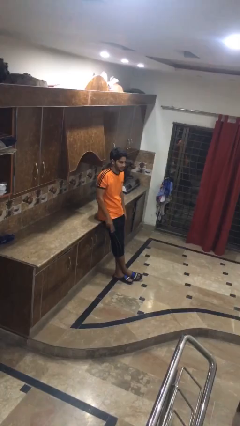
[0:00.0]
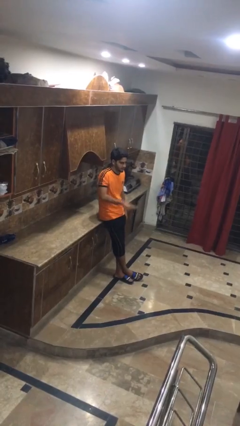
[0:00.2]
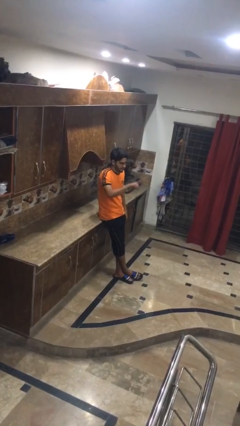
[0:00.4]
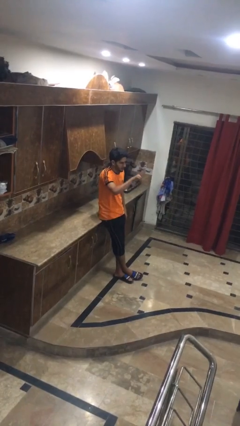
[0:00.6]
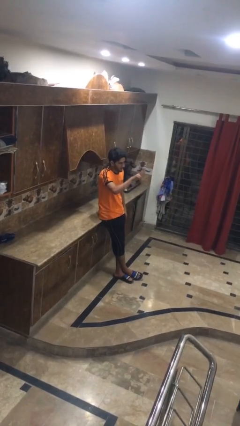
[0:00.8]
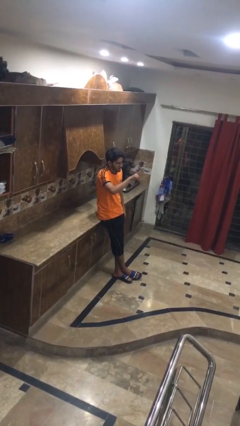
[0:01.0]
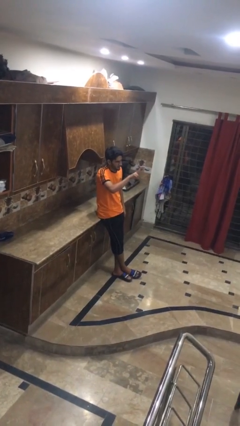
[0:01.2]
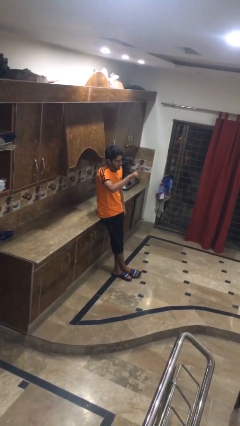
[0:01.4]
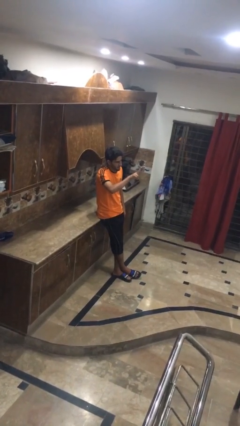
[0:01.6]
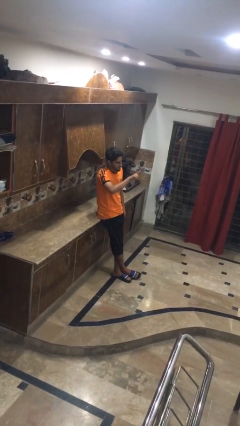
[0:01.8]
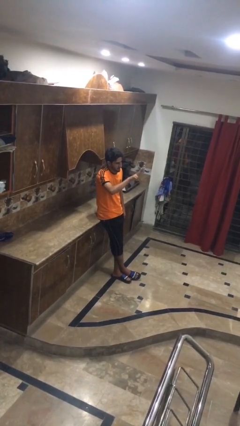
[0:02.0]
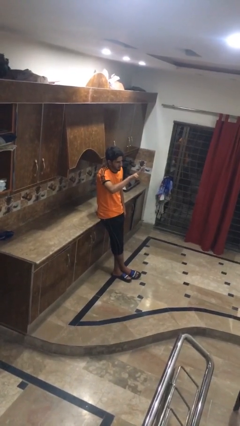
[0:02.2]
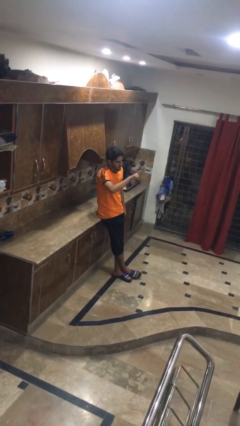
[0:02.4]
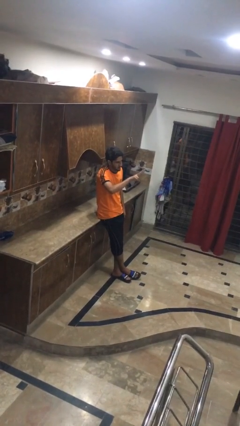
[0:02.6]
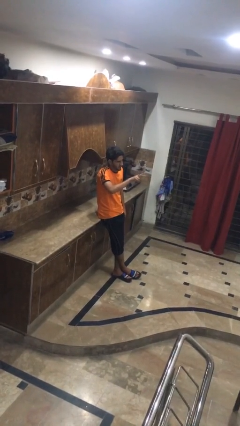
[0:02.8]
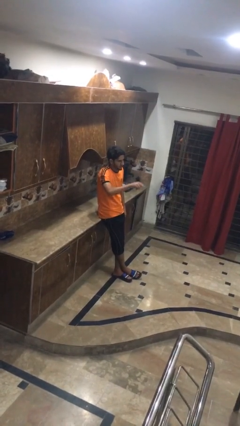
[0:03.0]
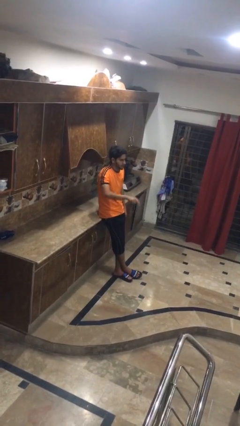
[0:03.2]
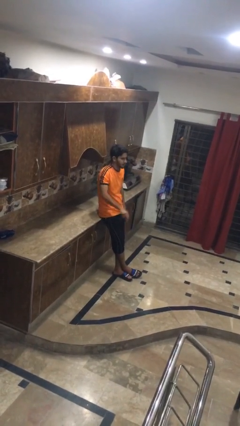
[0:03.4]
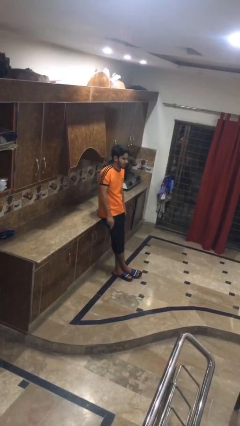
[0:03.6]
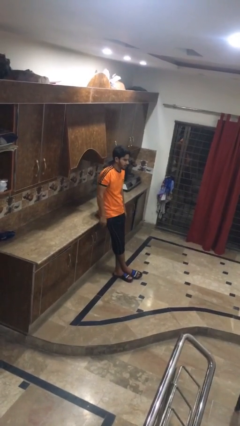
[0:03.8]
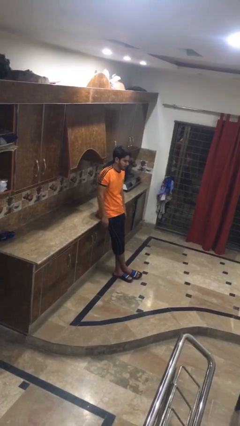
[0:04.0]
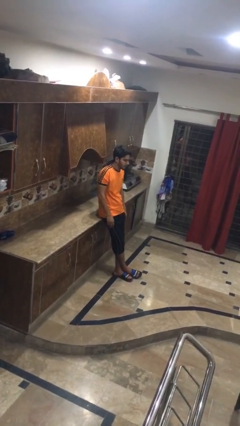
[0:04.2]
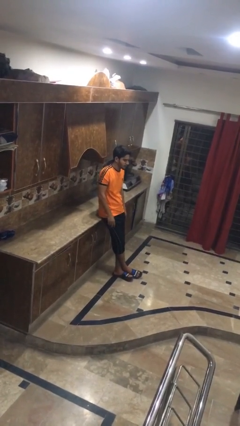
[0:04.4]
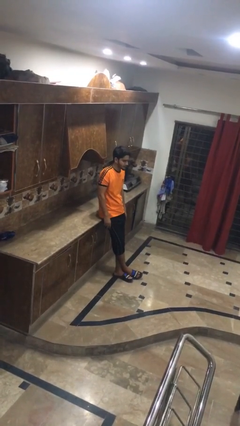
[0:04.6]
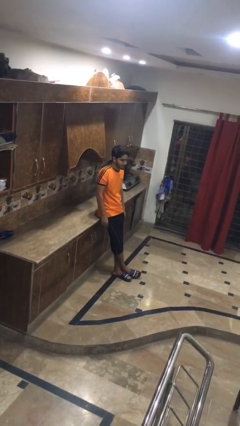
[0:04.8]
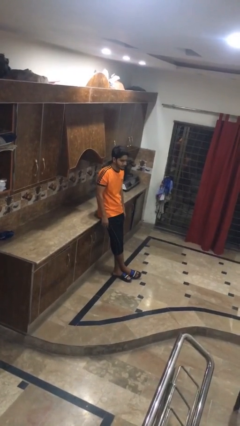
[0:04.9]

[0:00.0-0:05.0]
person gestures peace

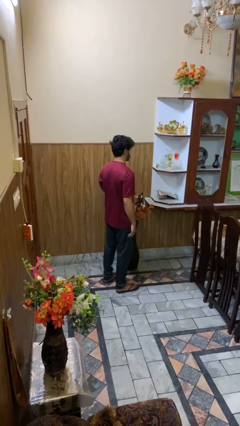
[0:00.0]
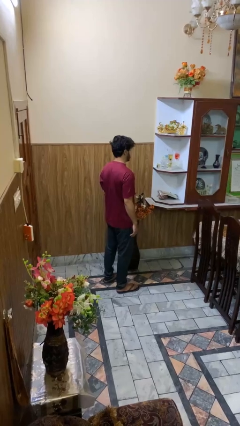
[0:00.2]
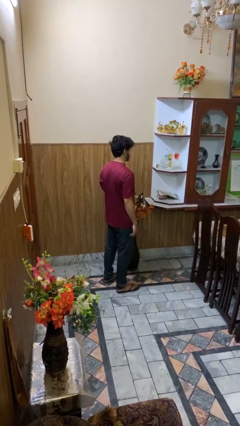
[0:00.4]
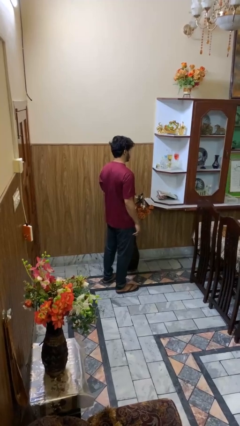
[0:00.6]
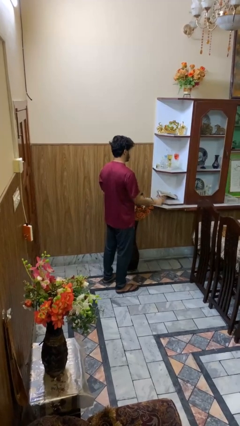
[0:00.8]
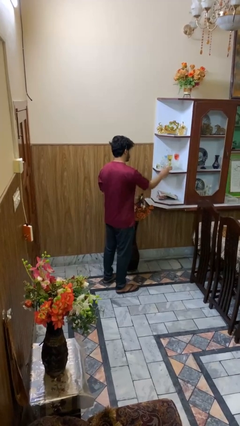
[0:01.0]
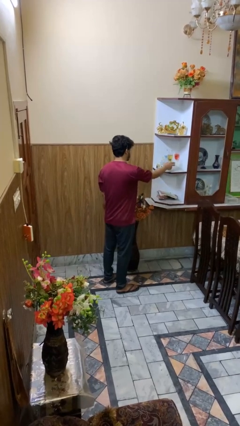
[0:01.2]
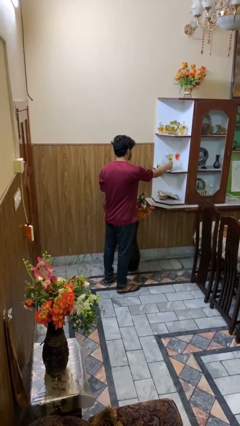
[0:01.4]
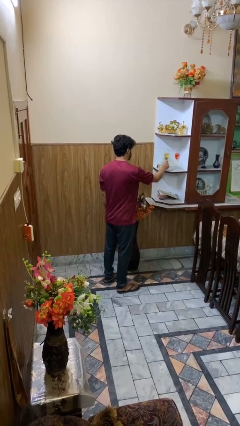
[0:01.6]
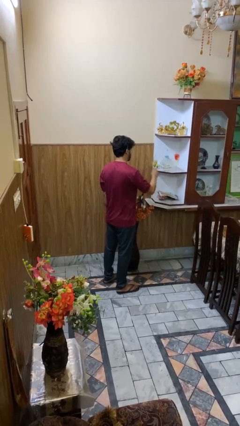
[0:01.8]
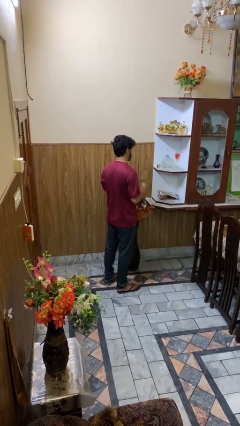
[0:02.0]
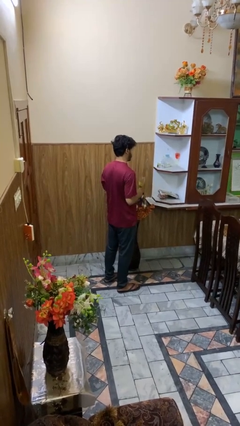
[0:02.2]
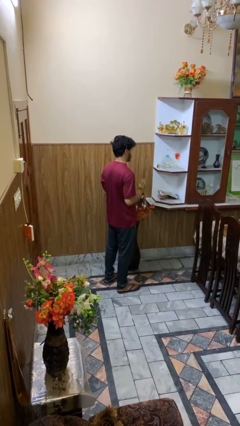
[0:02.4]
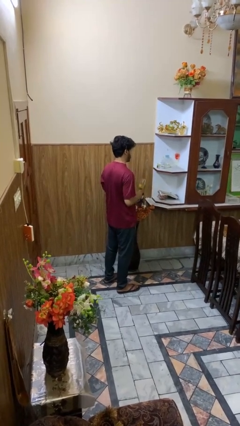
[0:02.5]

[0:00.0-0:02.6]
person picks up object from cabinet

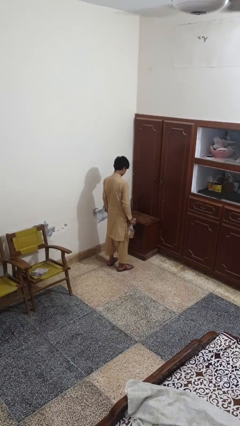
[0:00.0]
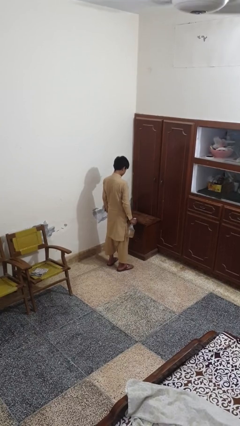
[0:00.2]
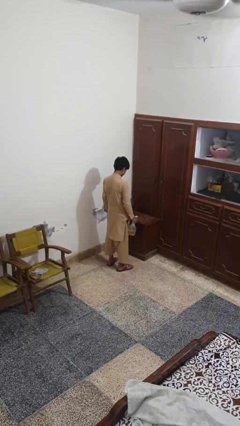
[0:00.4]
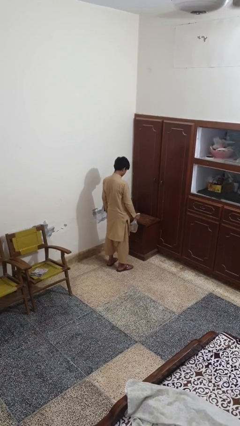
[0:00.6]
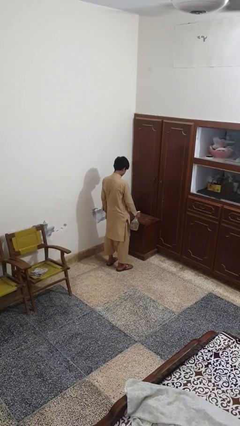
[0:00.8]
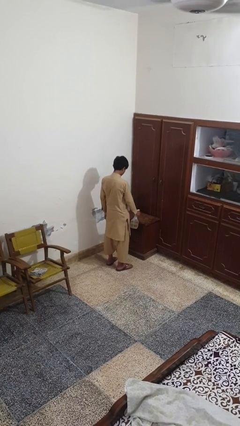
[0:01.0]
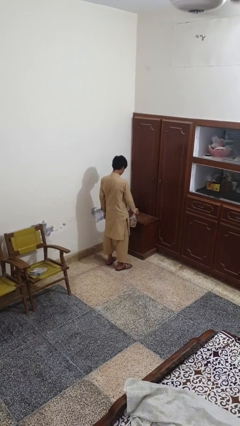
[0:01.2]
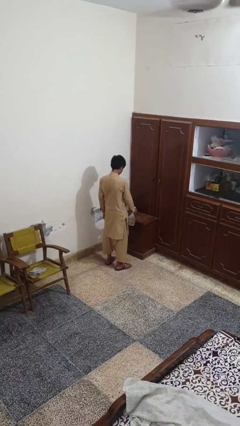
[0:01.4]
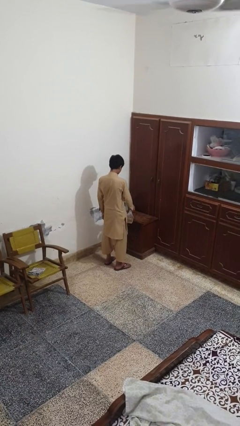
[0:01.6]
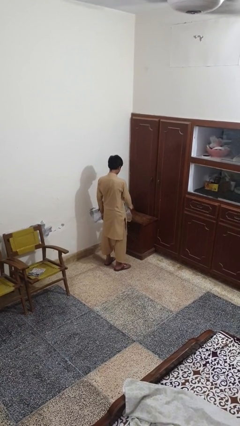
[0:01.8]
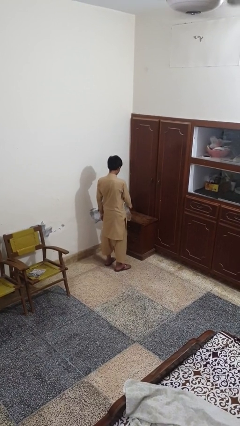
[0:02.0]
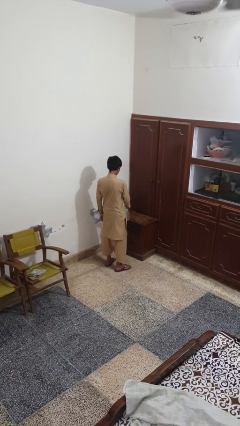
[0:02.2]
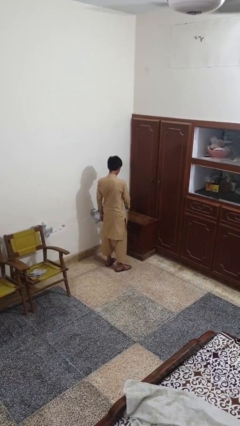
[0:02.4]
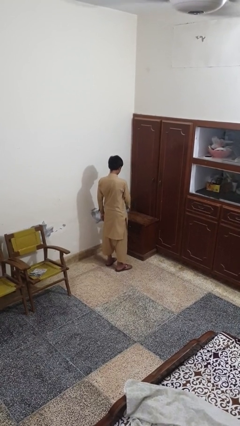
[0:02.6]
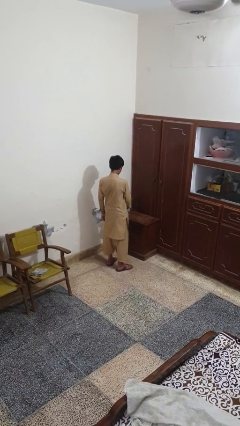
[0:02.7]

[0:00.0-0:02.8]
person sprays from bottle

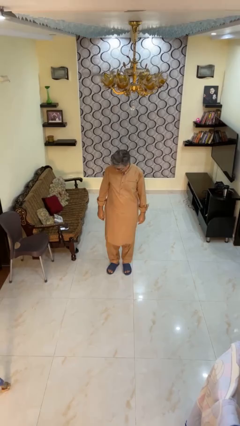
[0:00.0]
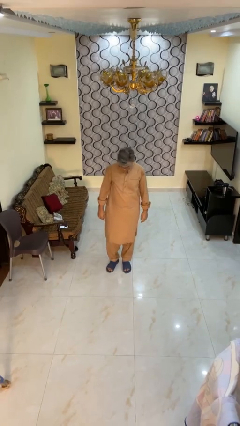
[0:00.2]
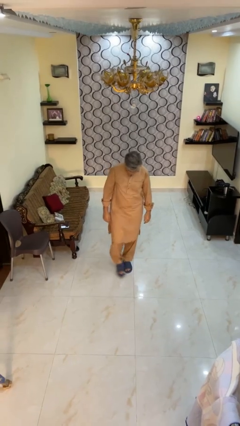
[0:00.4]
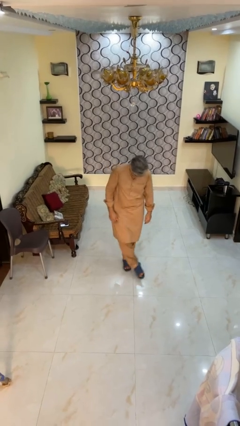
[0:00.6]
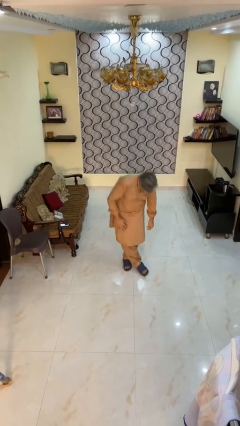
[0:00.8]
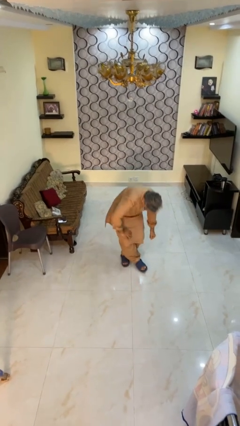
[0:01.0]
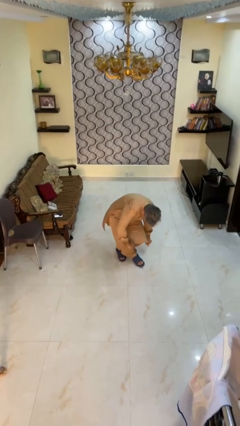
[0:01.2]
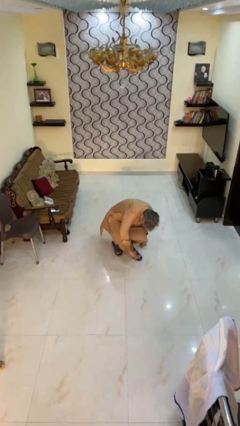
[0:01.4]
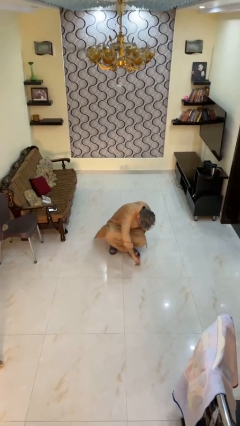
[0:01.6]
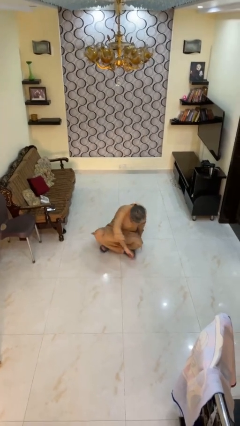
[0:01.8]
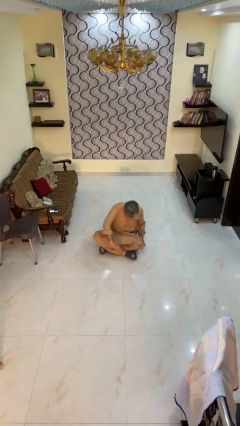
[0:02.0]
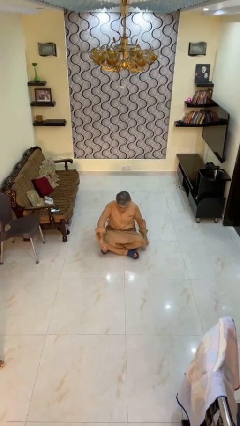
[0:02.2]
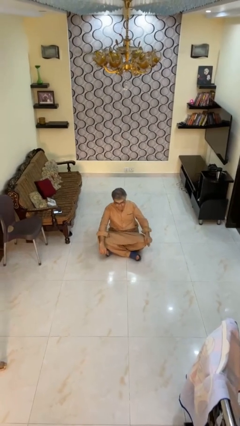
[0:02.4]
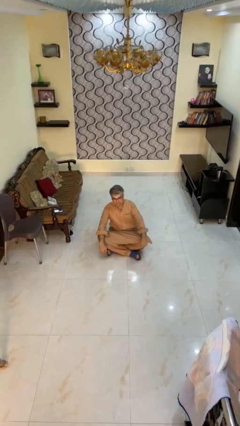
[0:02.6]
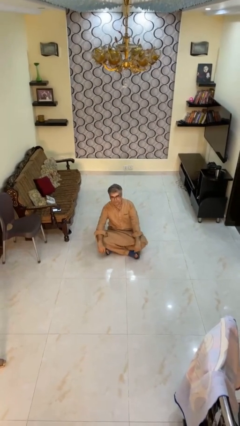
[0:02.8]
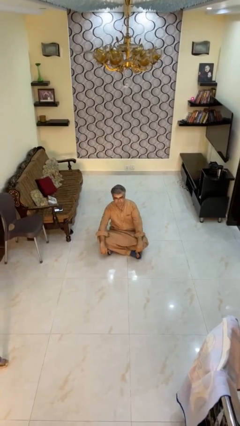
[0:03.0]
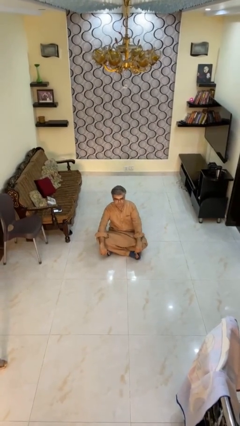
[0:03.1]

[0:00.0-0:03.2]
person sits crisscross

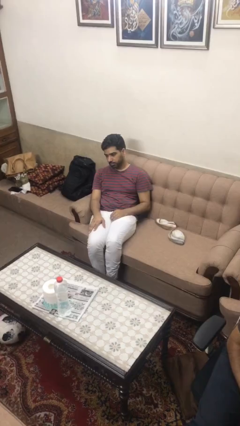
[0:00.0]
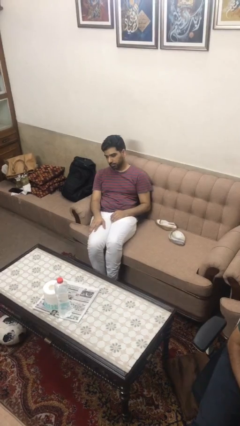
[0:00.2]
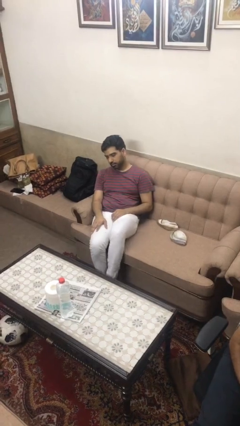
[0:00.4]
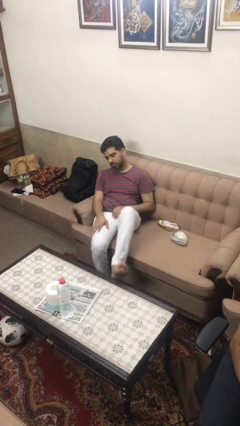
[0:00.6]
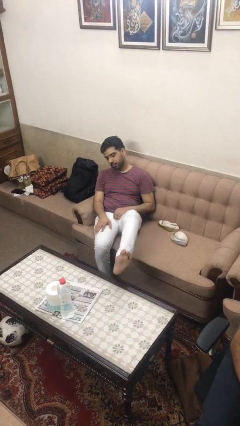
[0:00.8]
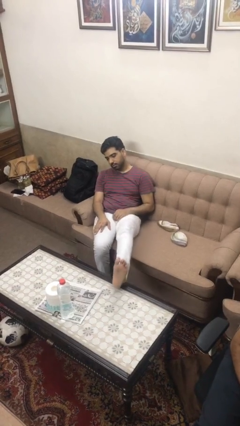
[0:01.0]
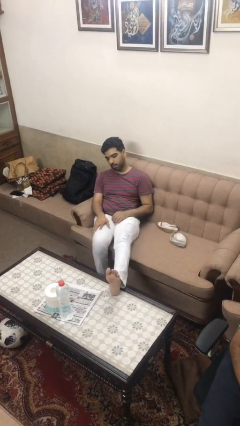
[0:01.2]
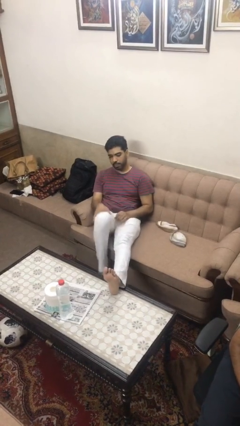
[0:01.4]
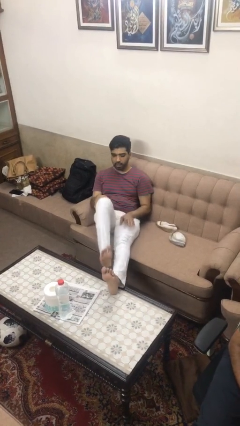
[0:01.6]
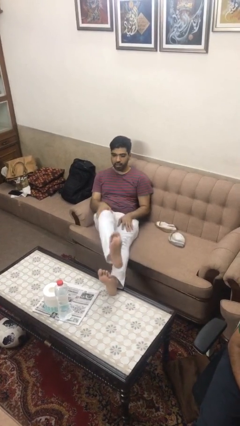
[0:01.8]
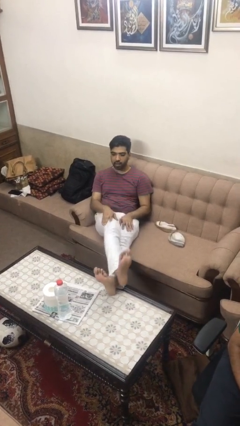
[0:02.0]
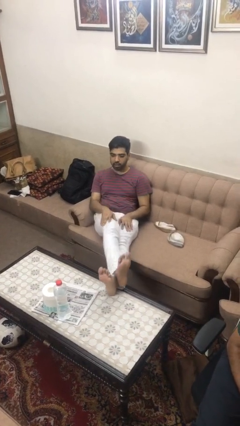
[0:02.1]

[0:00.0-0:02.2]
person puts feet up

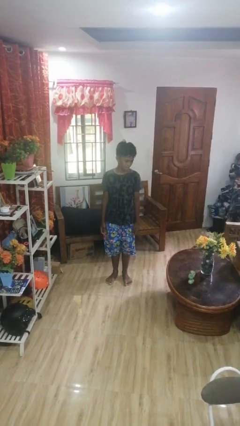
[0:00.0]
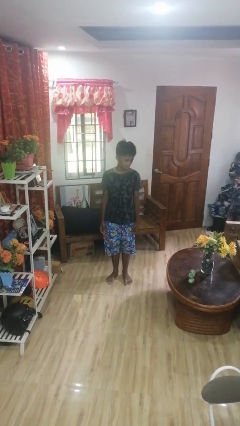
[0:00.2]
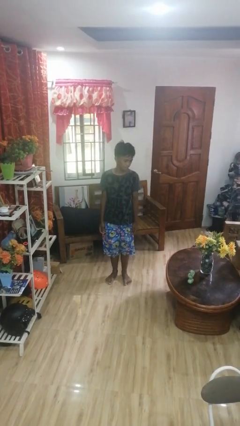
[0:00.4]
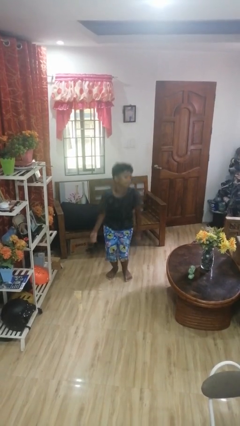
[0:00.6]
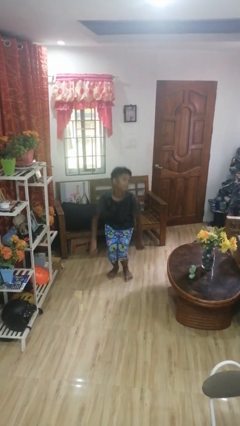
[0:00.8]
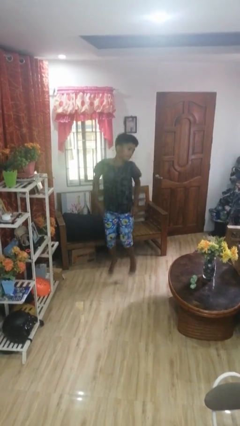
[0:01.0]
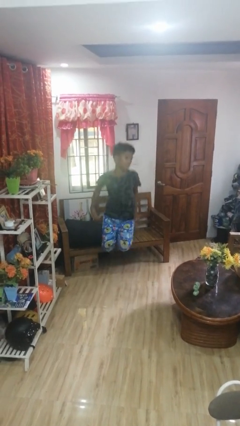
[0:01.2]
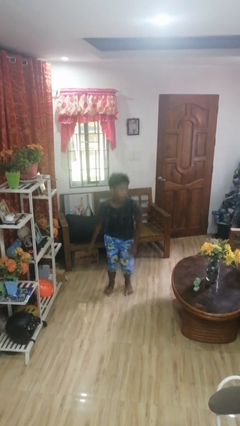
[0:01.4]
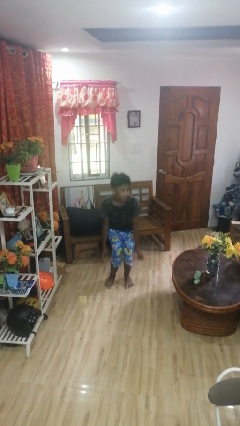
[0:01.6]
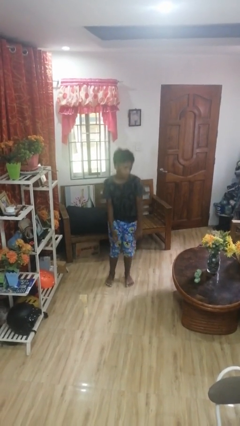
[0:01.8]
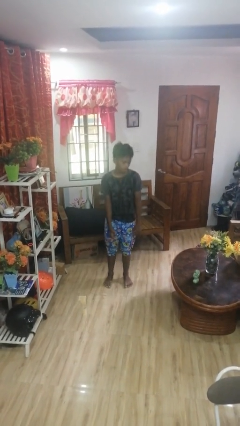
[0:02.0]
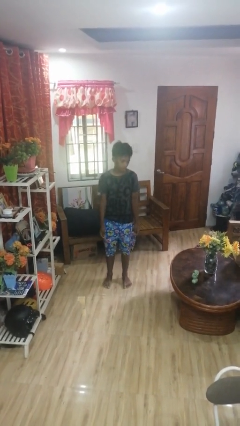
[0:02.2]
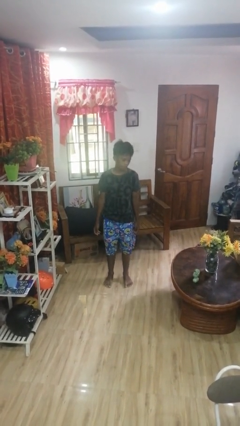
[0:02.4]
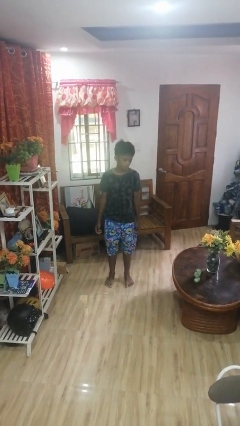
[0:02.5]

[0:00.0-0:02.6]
person jumps
